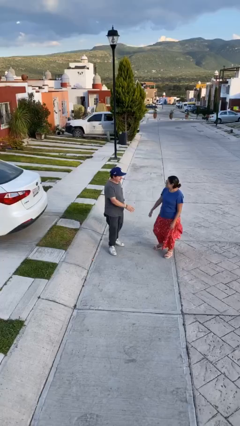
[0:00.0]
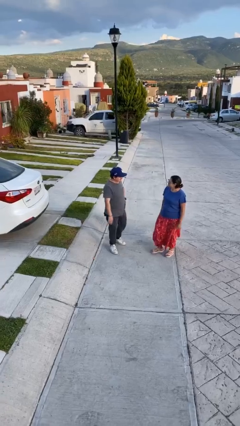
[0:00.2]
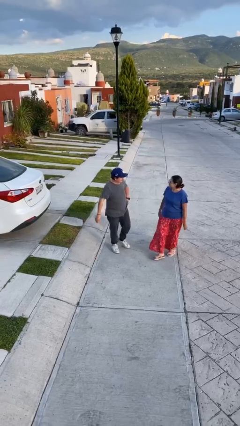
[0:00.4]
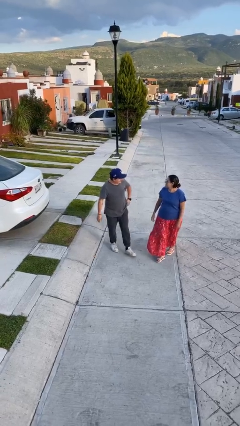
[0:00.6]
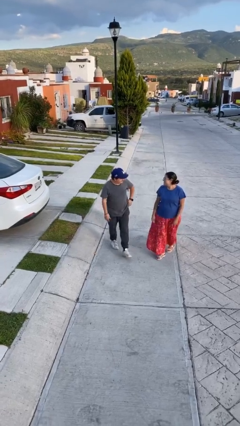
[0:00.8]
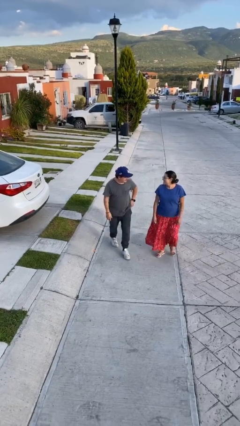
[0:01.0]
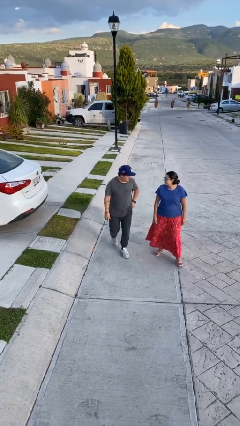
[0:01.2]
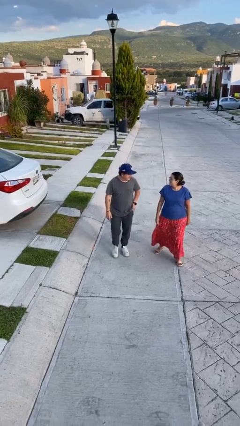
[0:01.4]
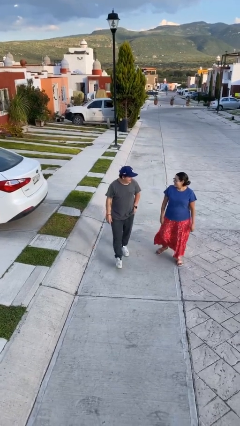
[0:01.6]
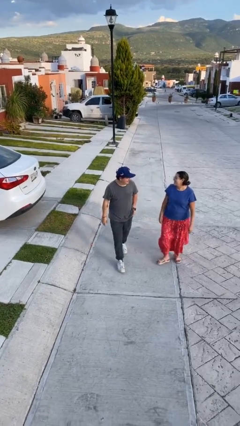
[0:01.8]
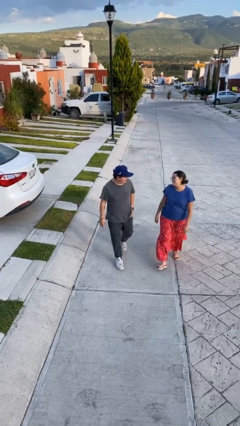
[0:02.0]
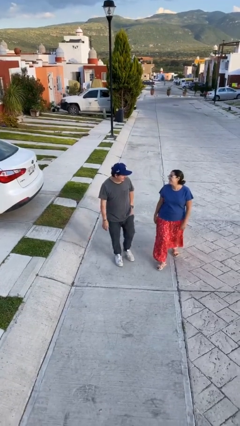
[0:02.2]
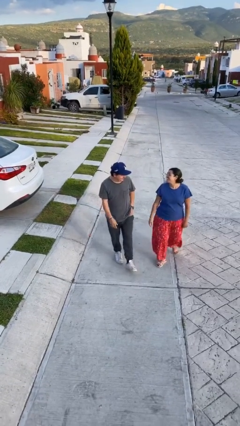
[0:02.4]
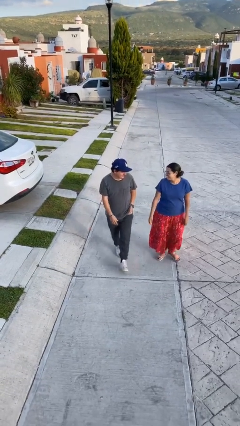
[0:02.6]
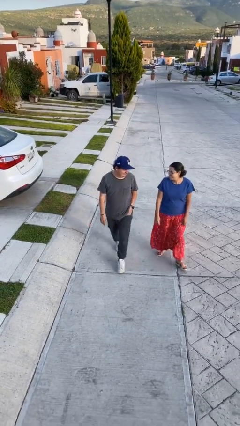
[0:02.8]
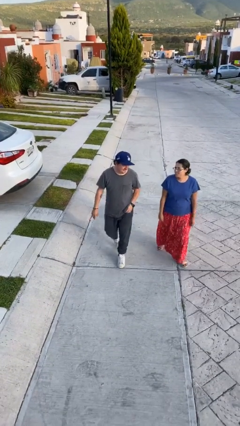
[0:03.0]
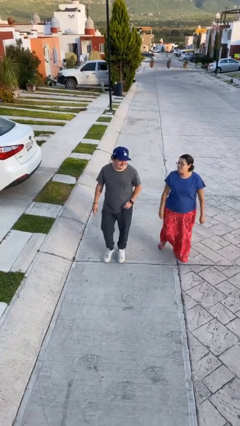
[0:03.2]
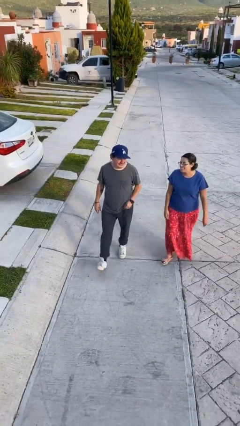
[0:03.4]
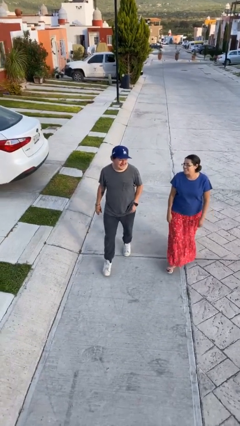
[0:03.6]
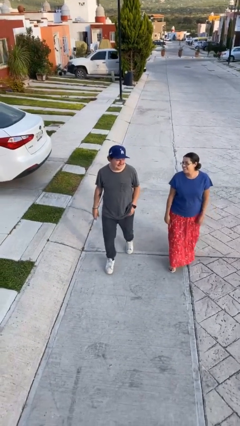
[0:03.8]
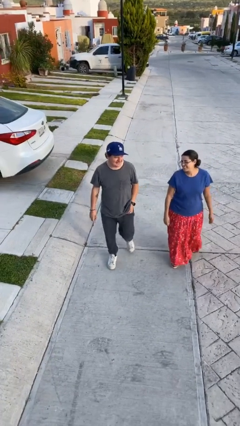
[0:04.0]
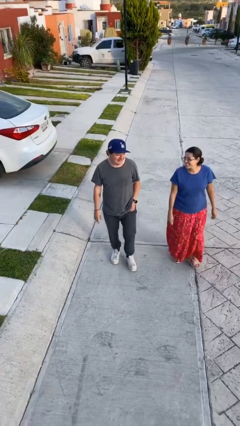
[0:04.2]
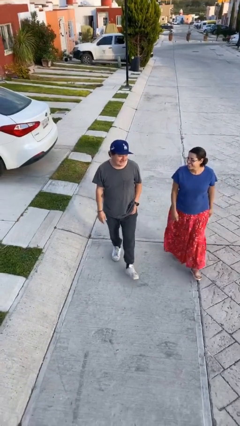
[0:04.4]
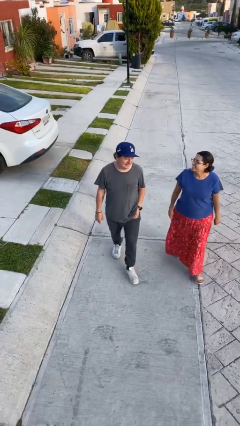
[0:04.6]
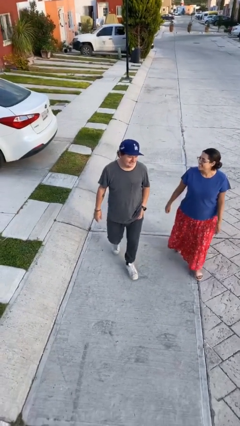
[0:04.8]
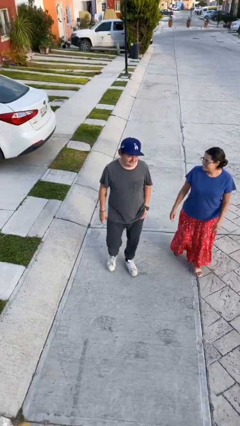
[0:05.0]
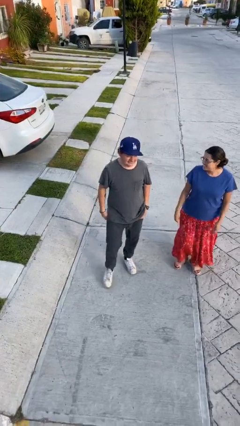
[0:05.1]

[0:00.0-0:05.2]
person talks to person

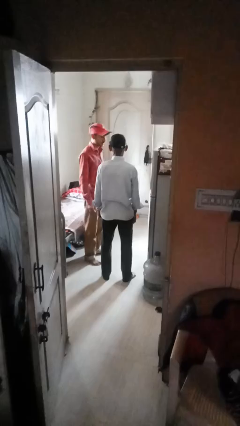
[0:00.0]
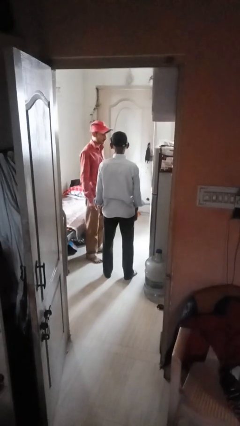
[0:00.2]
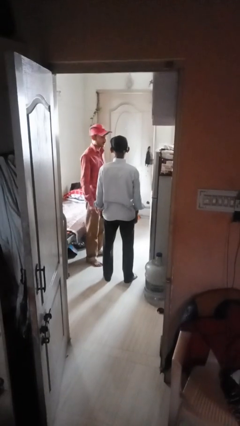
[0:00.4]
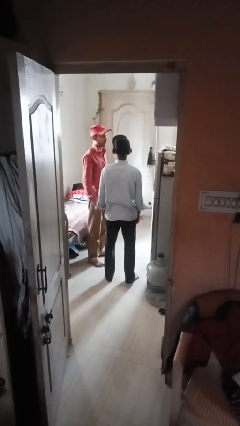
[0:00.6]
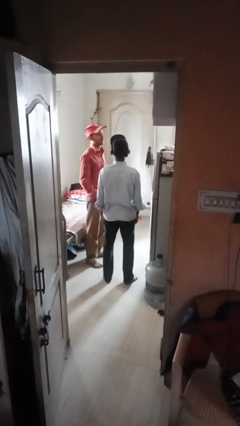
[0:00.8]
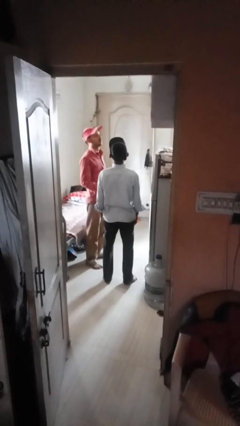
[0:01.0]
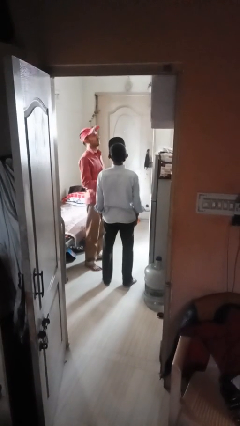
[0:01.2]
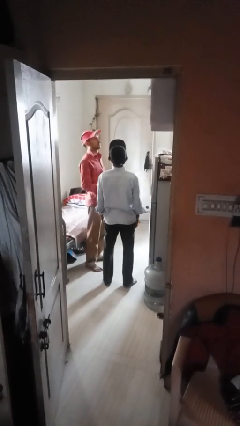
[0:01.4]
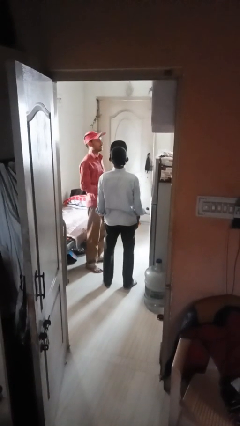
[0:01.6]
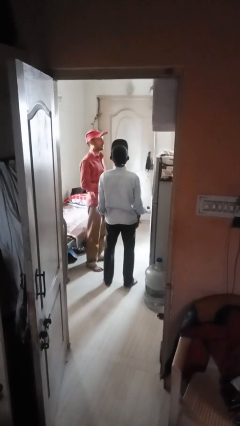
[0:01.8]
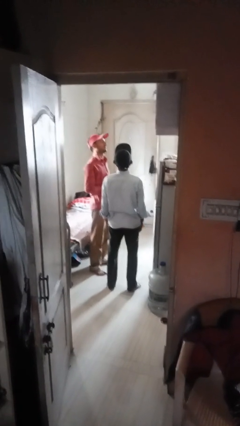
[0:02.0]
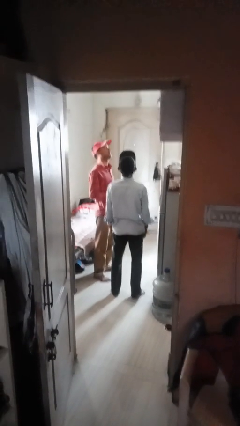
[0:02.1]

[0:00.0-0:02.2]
person laughs with person

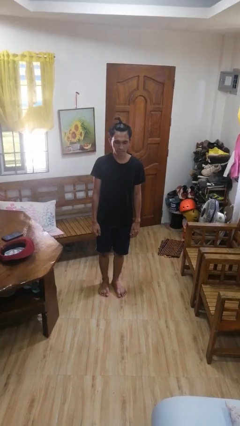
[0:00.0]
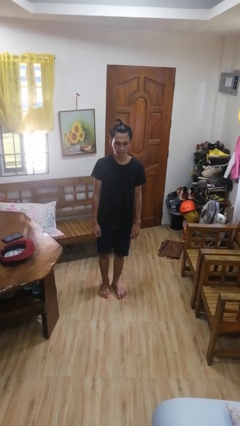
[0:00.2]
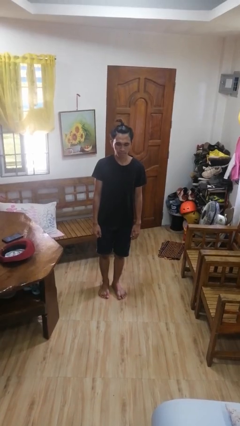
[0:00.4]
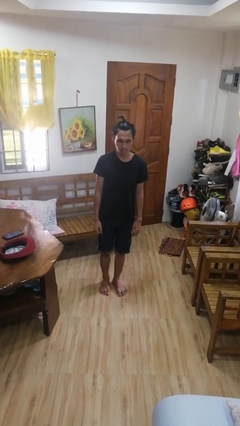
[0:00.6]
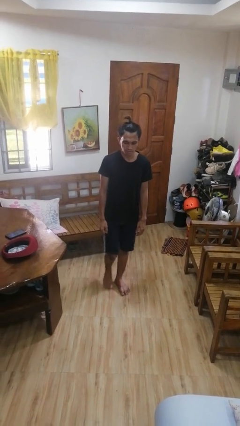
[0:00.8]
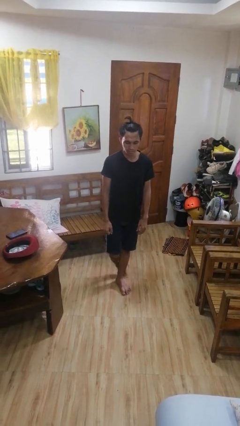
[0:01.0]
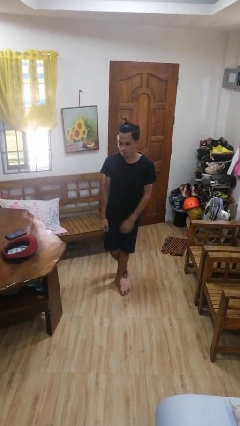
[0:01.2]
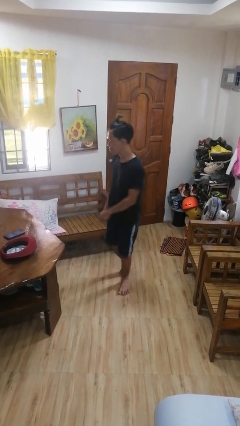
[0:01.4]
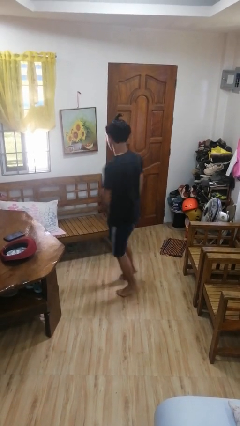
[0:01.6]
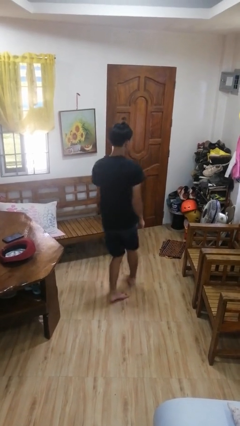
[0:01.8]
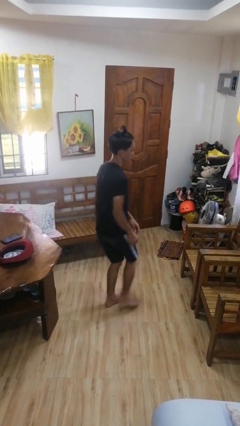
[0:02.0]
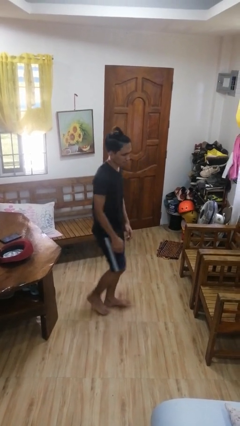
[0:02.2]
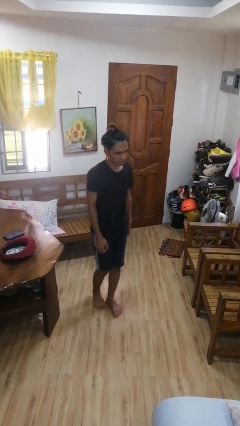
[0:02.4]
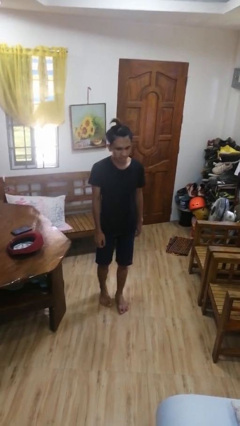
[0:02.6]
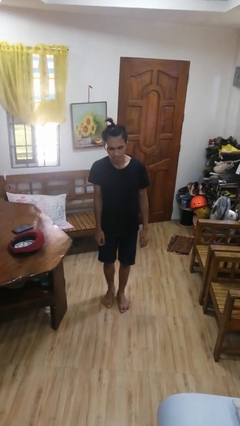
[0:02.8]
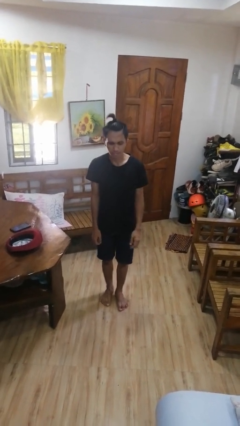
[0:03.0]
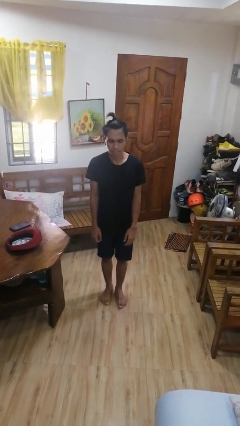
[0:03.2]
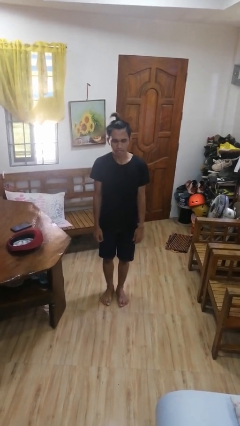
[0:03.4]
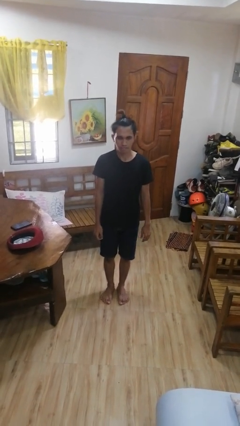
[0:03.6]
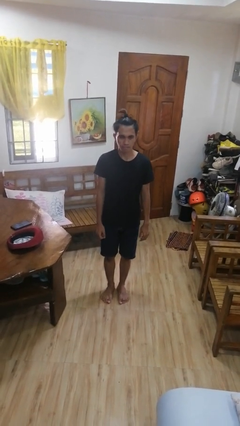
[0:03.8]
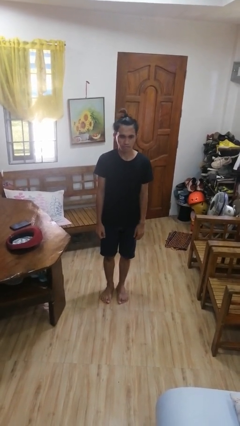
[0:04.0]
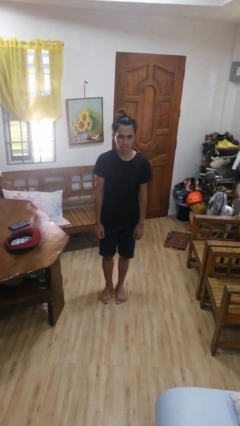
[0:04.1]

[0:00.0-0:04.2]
person twirls

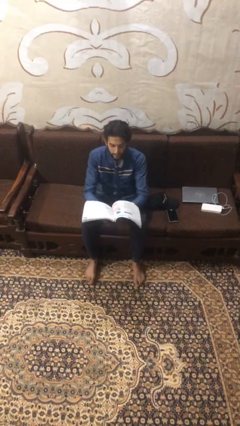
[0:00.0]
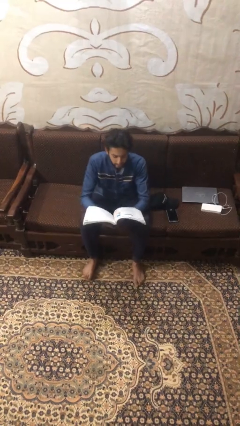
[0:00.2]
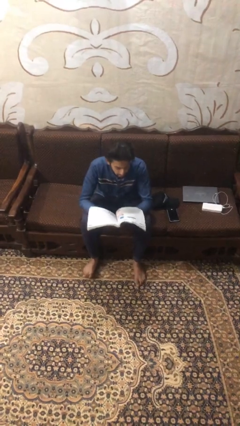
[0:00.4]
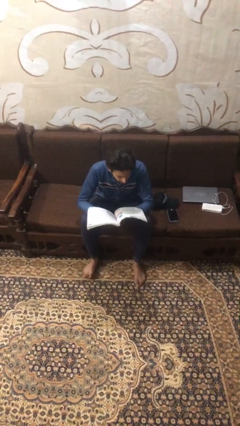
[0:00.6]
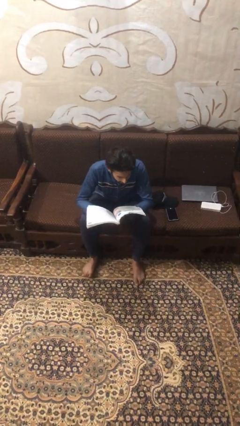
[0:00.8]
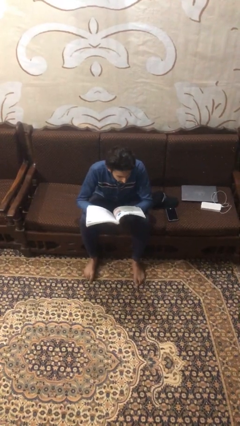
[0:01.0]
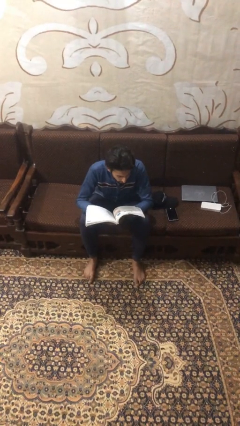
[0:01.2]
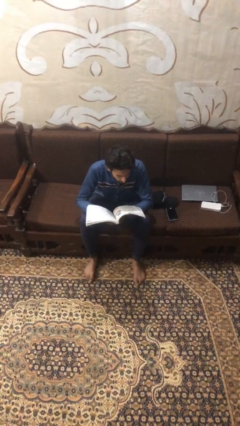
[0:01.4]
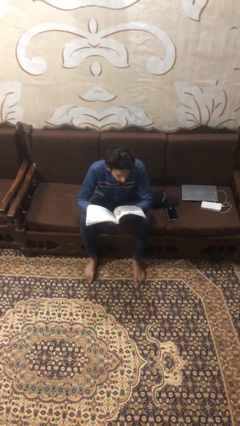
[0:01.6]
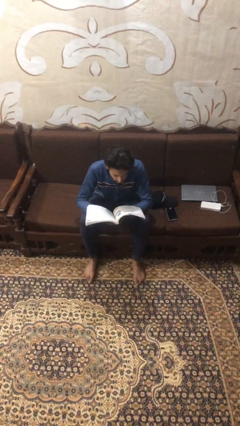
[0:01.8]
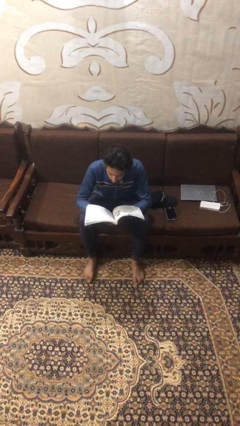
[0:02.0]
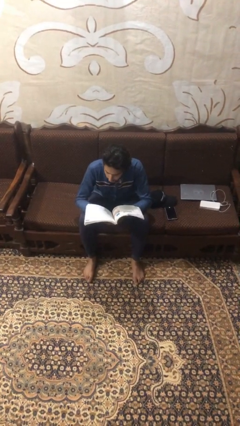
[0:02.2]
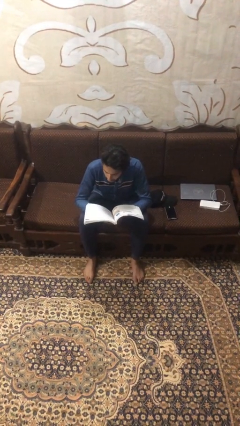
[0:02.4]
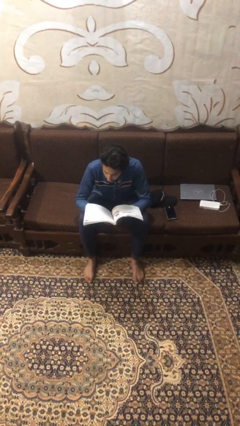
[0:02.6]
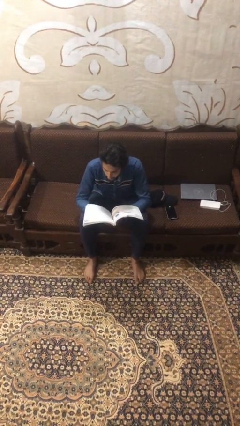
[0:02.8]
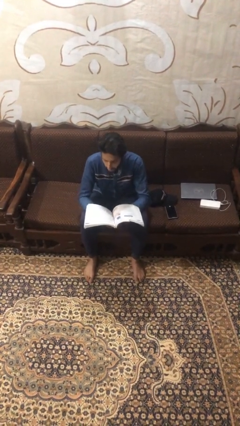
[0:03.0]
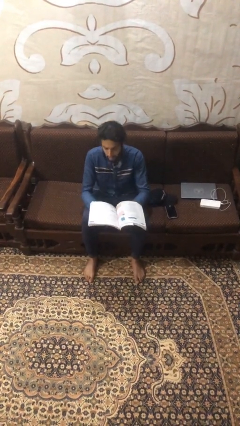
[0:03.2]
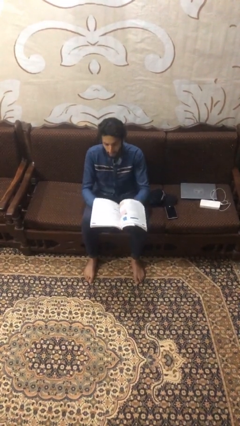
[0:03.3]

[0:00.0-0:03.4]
person reads document

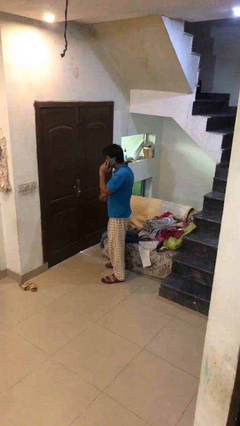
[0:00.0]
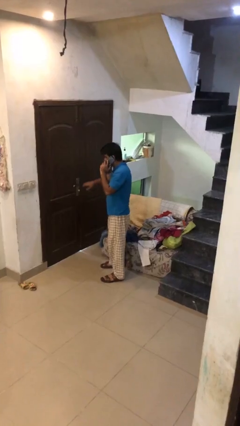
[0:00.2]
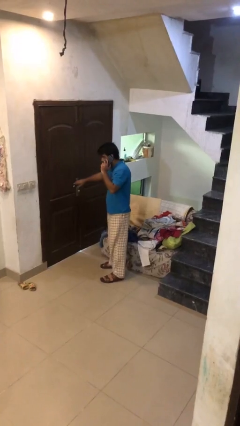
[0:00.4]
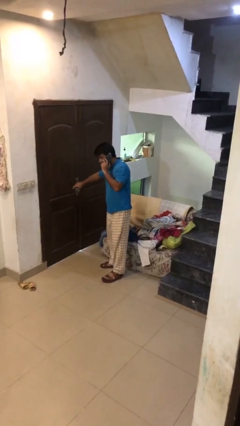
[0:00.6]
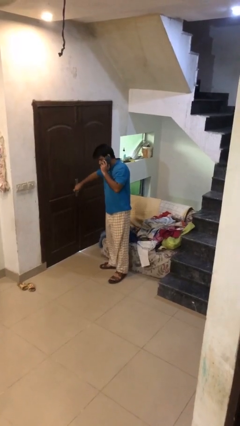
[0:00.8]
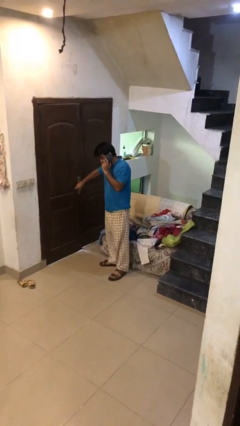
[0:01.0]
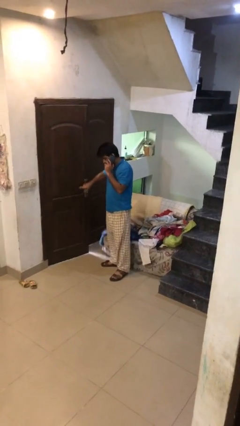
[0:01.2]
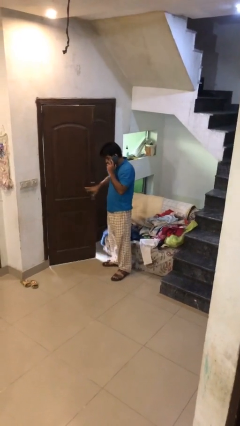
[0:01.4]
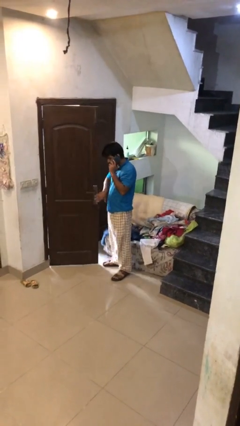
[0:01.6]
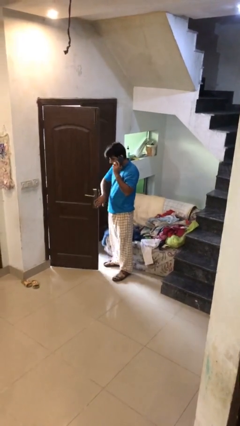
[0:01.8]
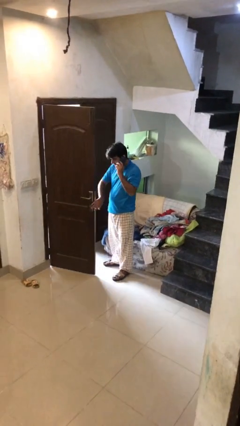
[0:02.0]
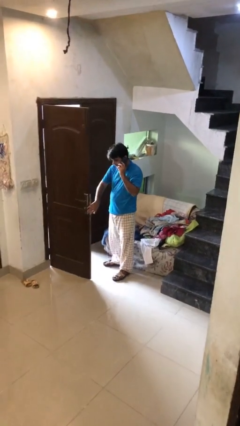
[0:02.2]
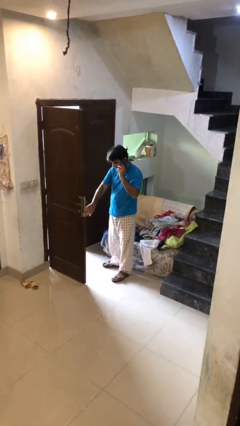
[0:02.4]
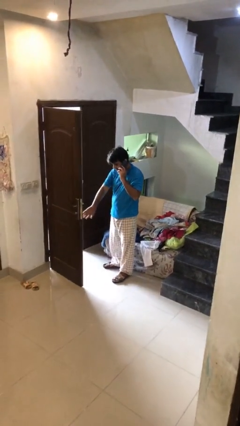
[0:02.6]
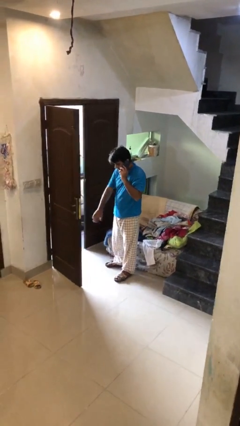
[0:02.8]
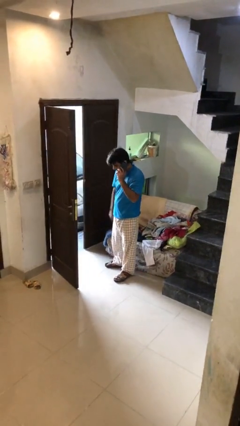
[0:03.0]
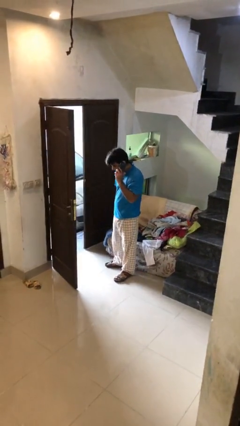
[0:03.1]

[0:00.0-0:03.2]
person opens facility door
